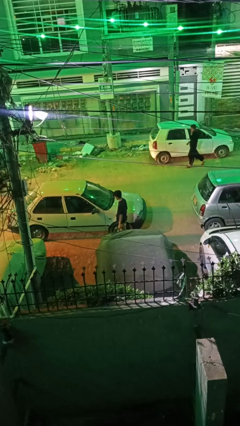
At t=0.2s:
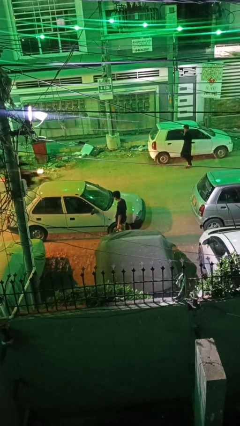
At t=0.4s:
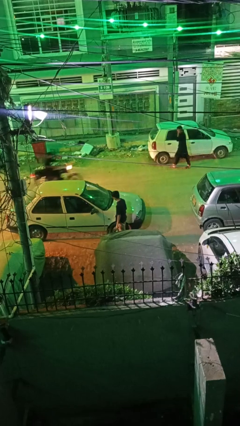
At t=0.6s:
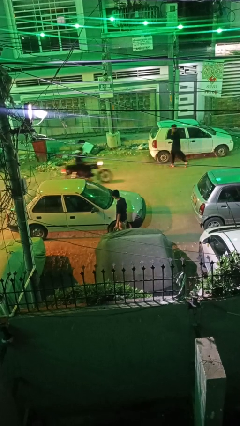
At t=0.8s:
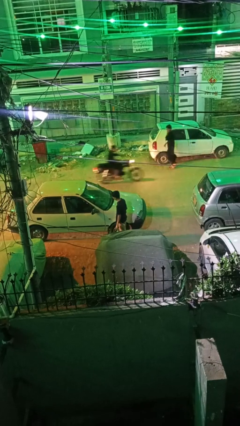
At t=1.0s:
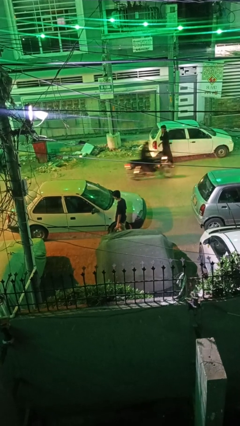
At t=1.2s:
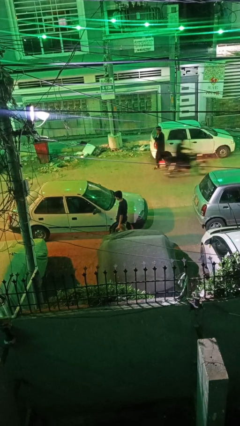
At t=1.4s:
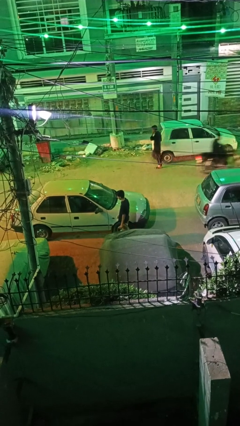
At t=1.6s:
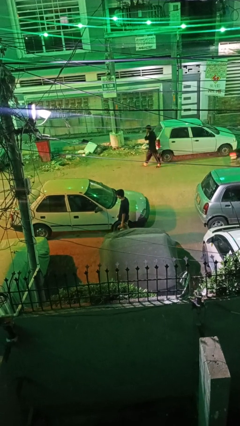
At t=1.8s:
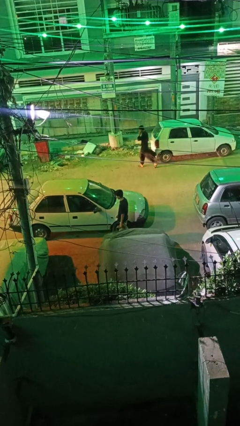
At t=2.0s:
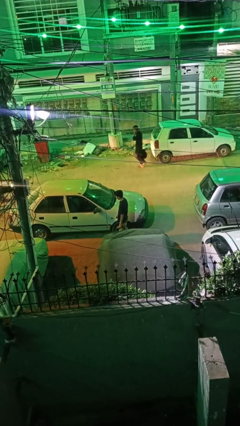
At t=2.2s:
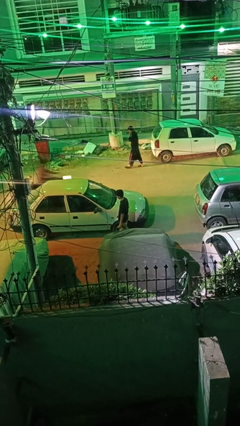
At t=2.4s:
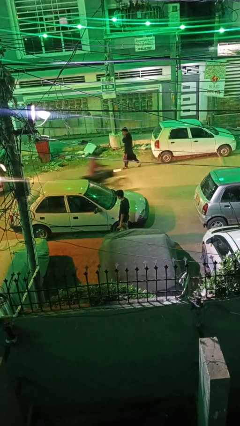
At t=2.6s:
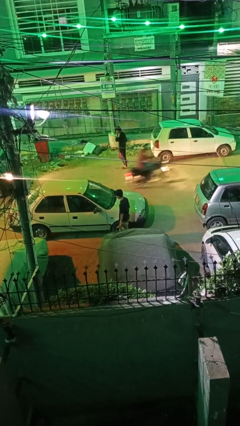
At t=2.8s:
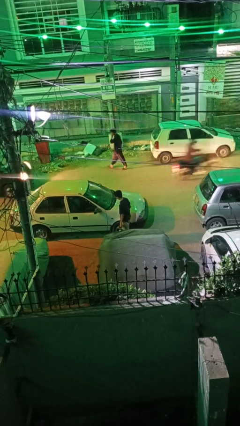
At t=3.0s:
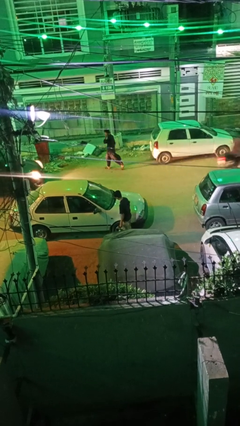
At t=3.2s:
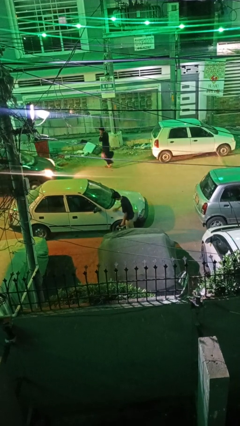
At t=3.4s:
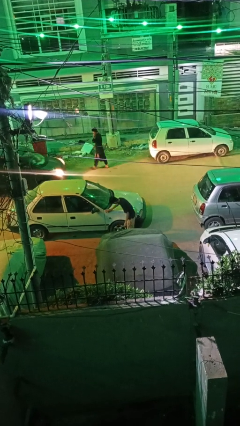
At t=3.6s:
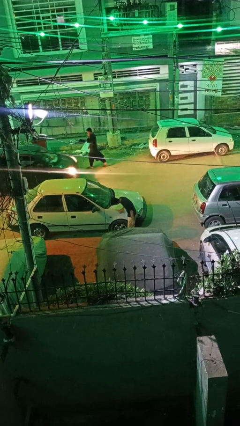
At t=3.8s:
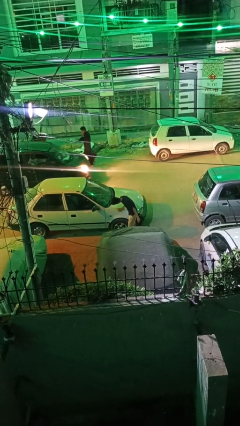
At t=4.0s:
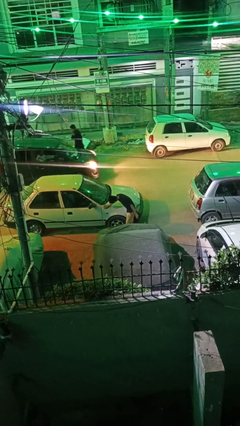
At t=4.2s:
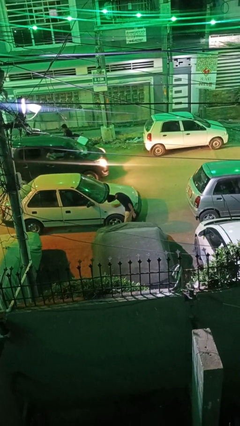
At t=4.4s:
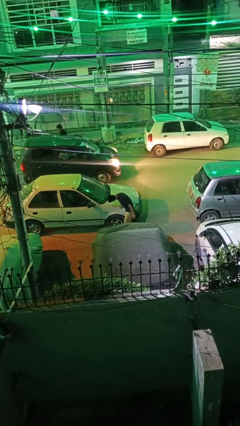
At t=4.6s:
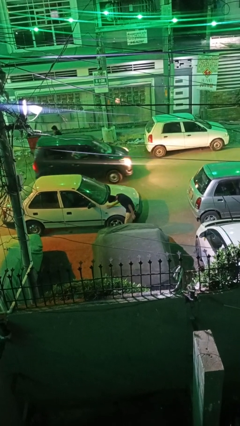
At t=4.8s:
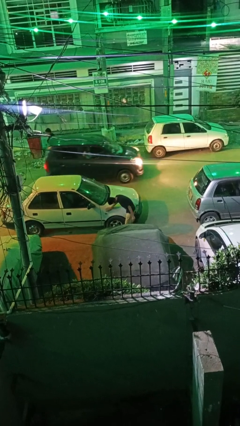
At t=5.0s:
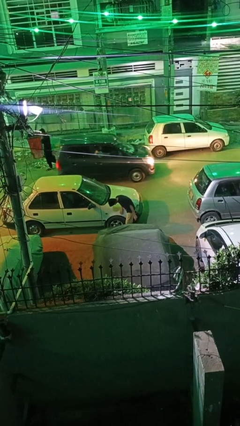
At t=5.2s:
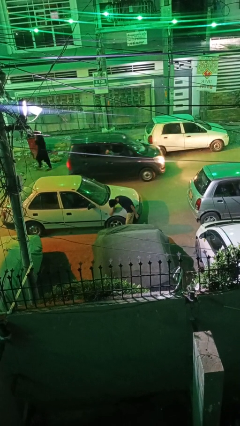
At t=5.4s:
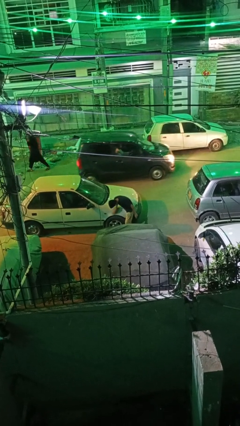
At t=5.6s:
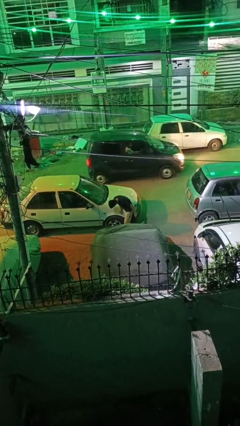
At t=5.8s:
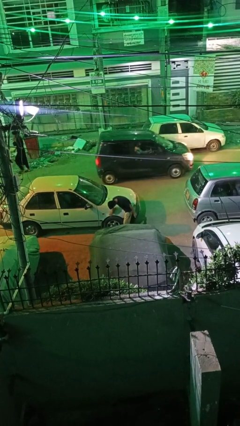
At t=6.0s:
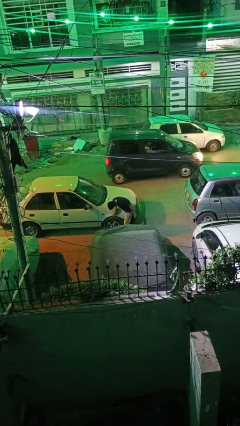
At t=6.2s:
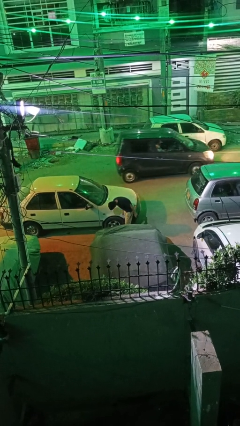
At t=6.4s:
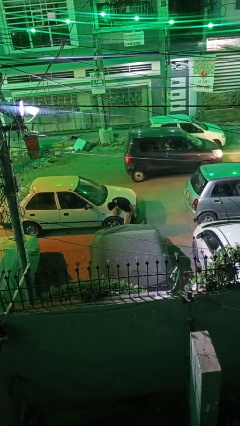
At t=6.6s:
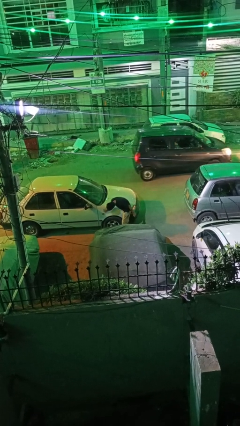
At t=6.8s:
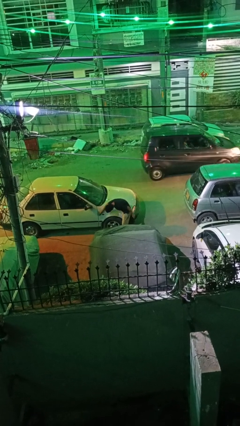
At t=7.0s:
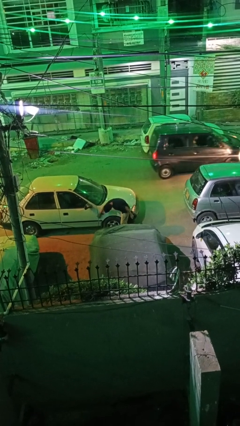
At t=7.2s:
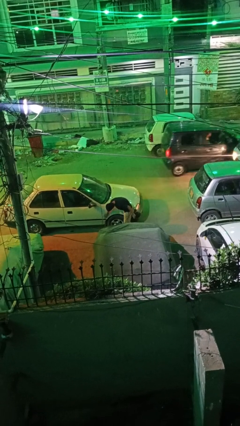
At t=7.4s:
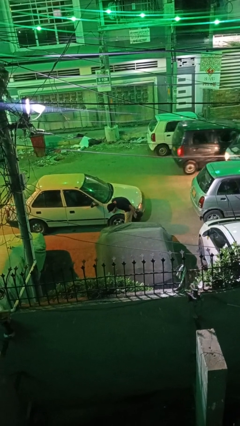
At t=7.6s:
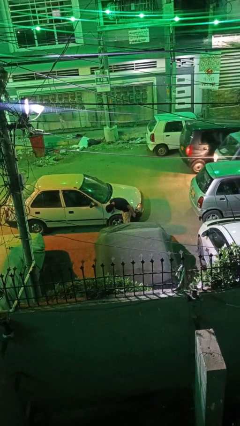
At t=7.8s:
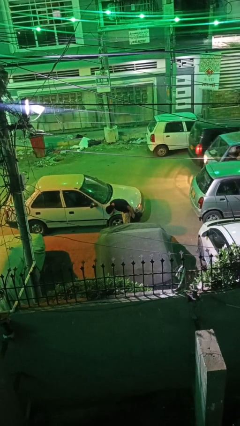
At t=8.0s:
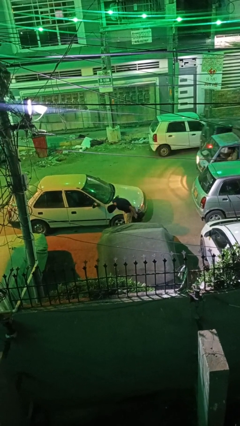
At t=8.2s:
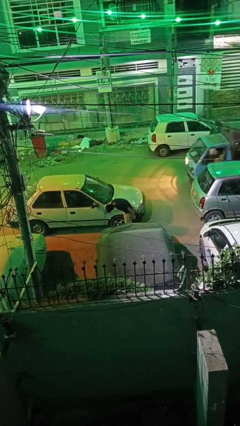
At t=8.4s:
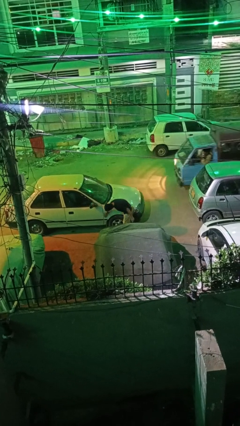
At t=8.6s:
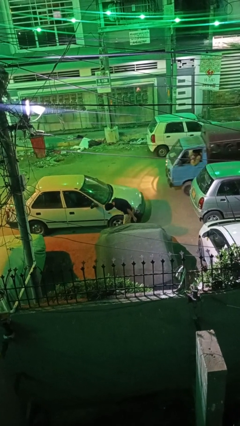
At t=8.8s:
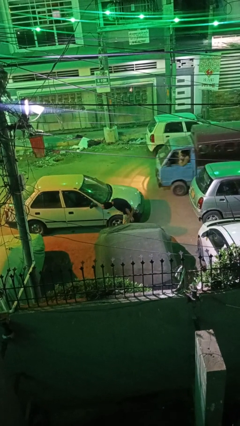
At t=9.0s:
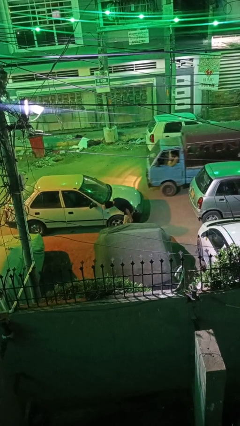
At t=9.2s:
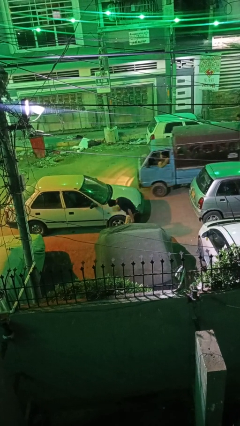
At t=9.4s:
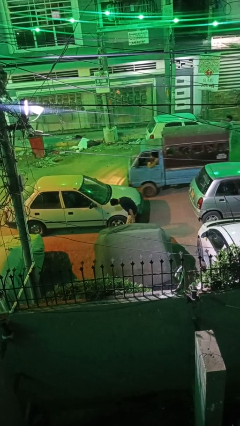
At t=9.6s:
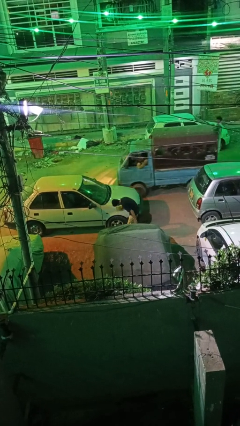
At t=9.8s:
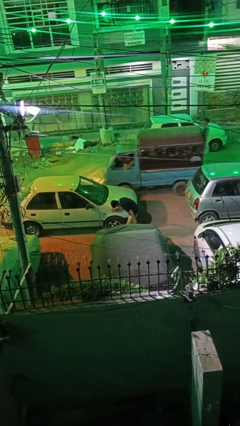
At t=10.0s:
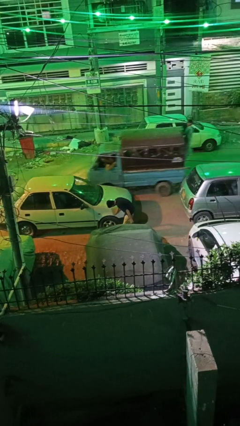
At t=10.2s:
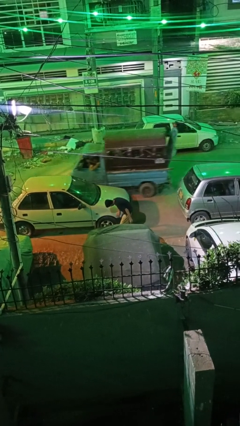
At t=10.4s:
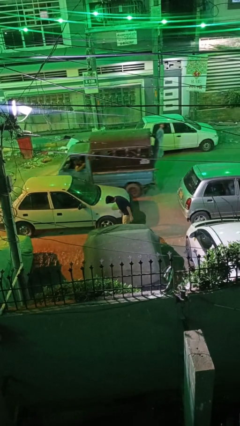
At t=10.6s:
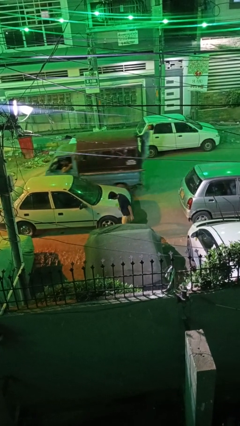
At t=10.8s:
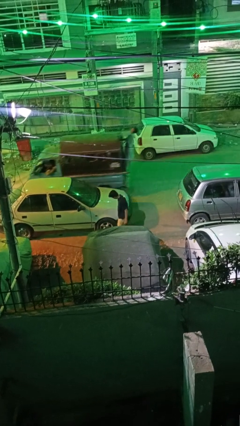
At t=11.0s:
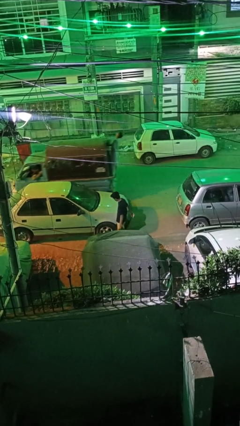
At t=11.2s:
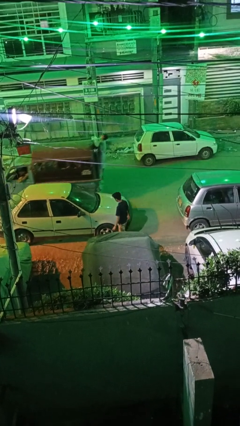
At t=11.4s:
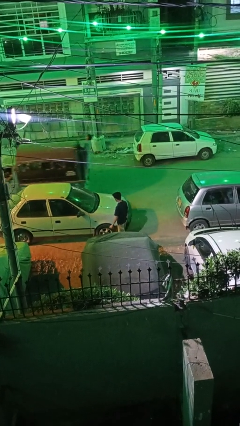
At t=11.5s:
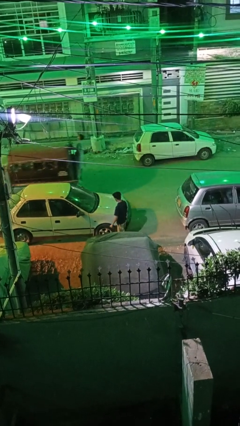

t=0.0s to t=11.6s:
person polishes car with rag

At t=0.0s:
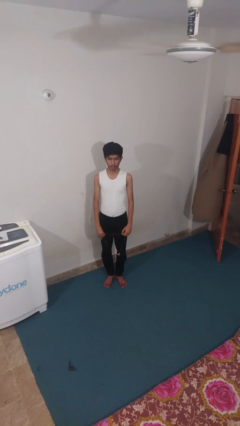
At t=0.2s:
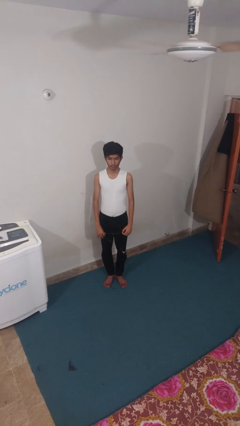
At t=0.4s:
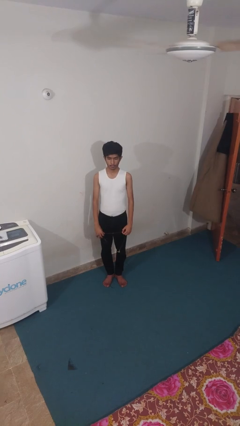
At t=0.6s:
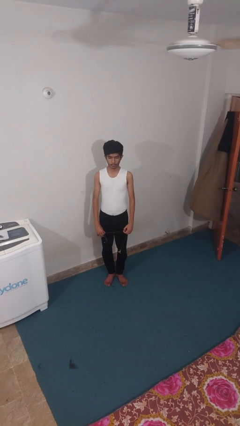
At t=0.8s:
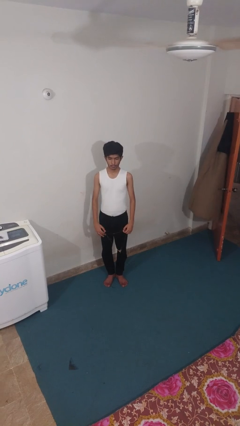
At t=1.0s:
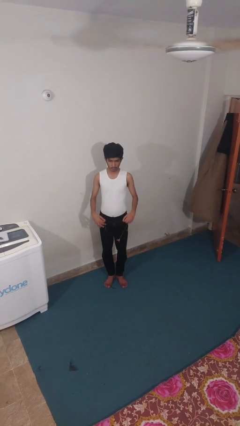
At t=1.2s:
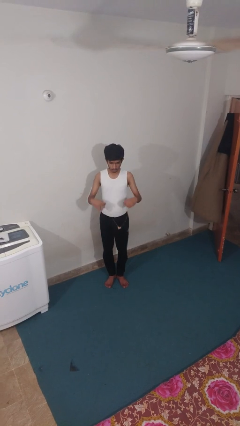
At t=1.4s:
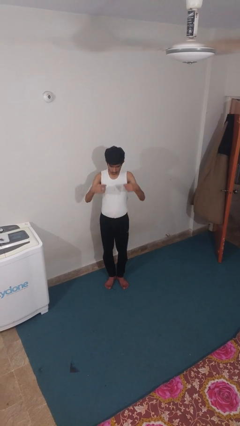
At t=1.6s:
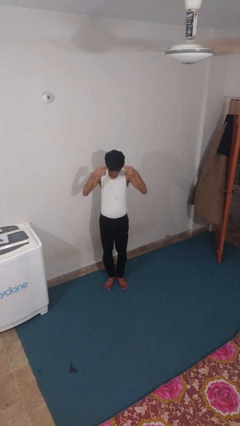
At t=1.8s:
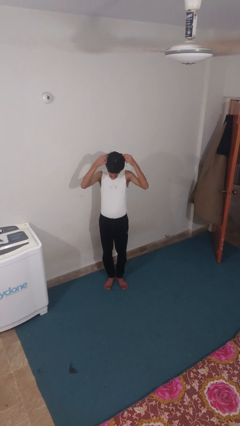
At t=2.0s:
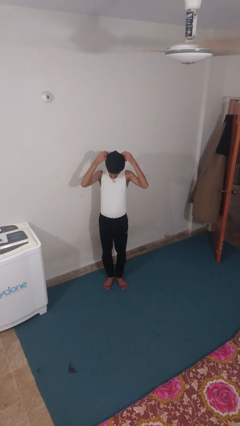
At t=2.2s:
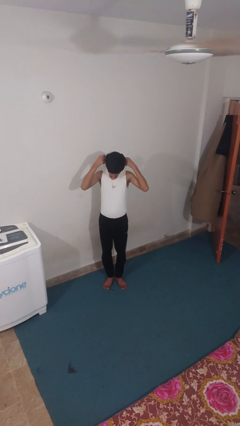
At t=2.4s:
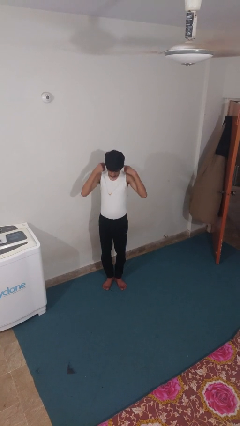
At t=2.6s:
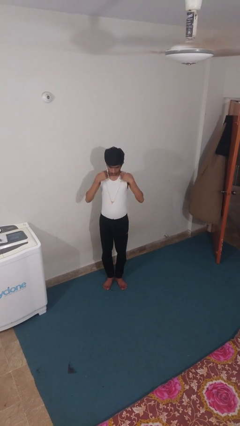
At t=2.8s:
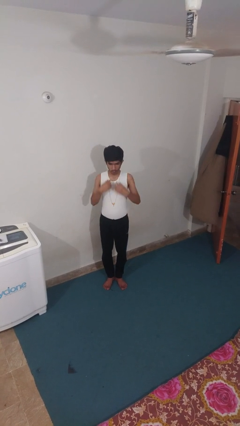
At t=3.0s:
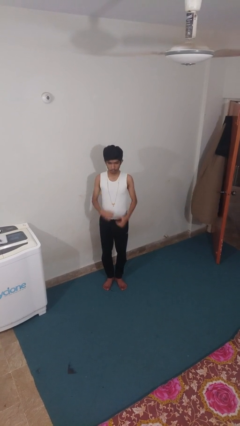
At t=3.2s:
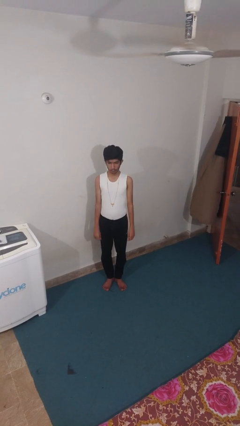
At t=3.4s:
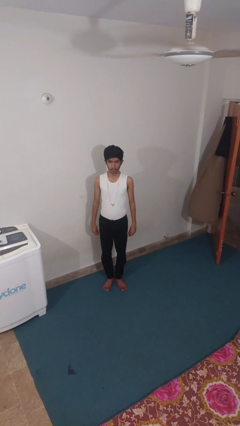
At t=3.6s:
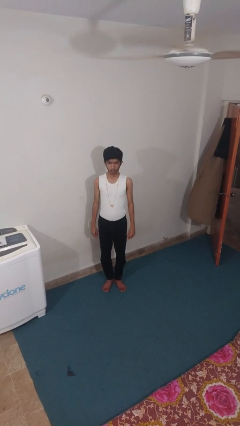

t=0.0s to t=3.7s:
person puts on necklace

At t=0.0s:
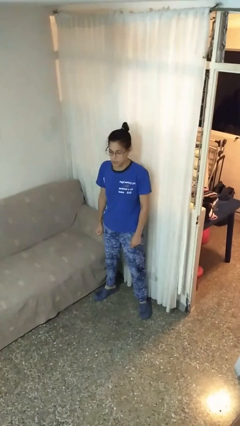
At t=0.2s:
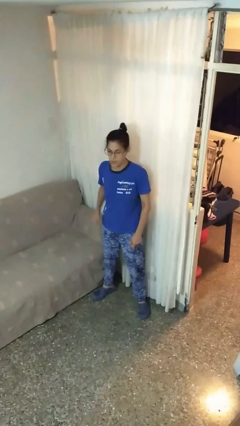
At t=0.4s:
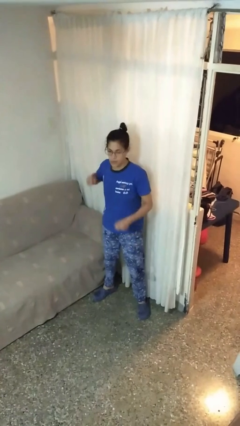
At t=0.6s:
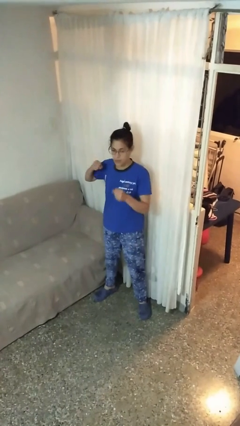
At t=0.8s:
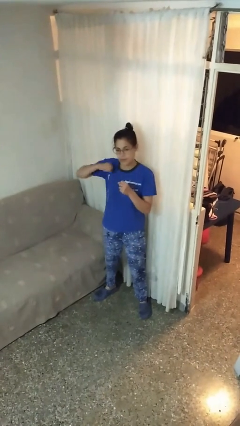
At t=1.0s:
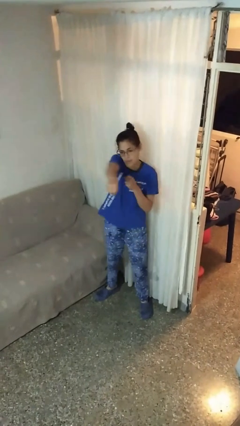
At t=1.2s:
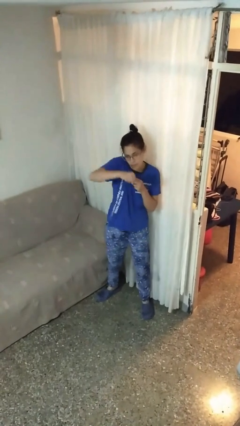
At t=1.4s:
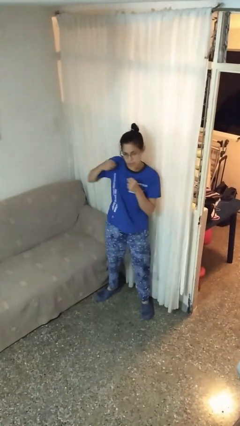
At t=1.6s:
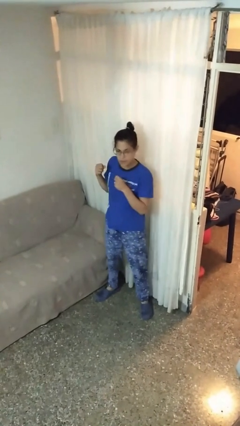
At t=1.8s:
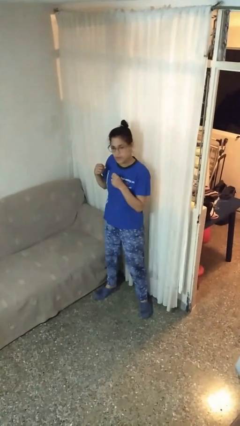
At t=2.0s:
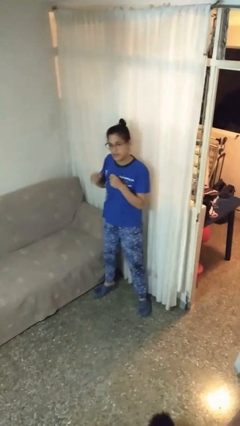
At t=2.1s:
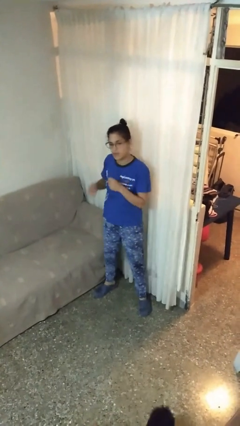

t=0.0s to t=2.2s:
person punches

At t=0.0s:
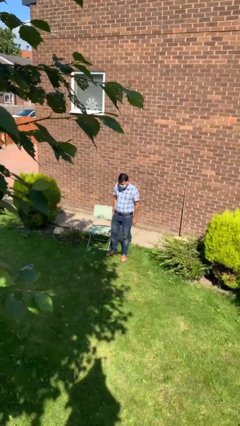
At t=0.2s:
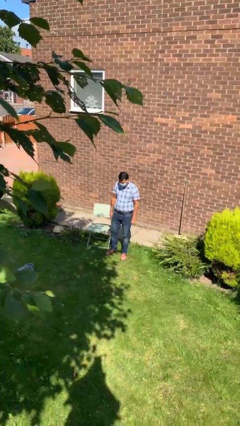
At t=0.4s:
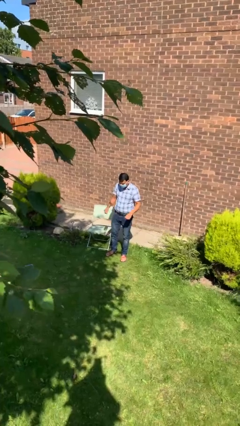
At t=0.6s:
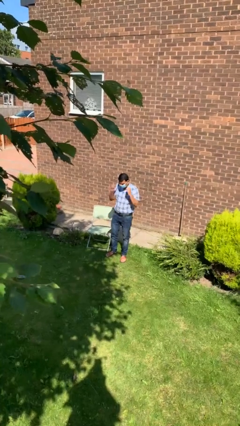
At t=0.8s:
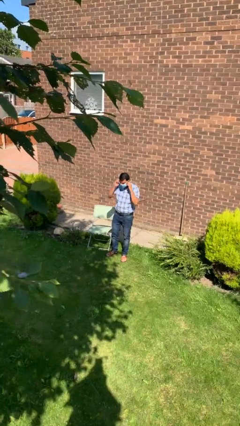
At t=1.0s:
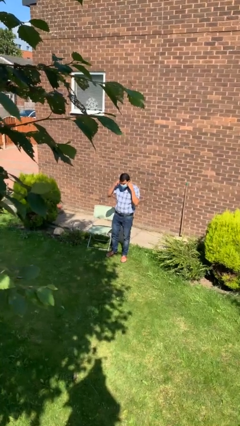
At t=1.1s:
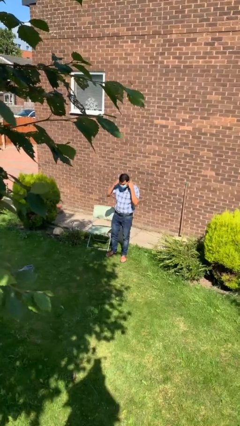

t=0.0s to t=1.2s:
person takes off facemask
